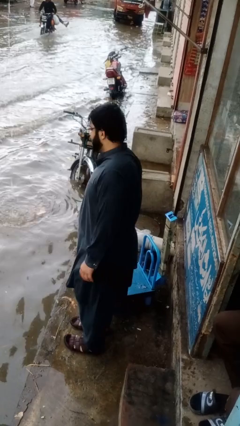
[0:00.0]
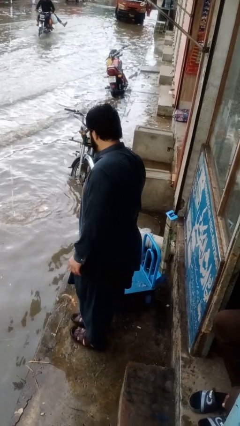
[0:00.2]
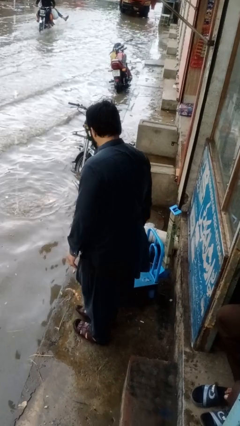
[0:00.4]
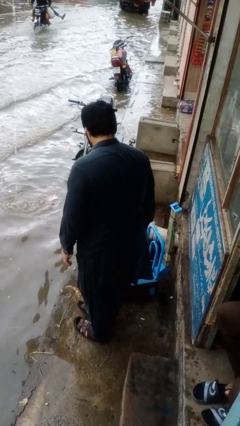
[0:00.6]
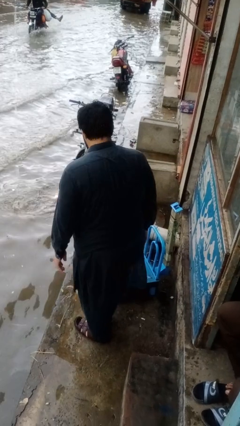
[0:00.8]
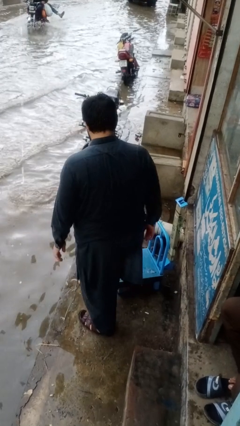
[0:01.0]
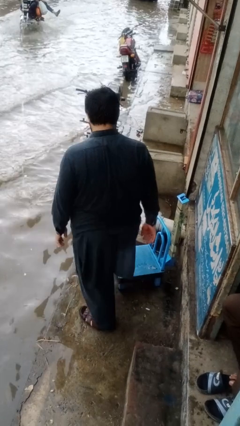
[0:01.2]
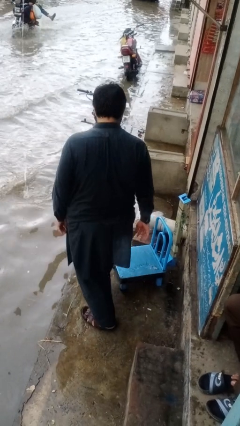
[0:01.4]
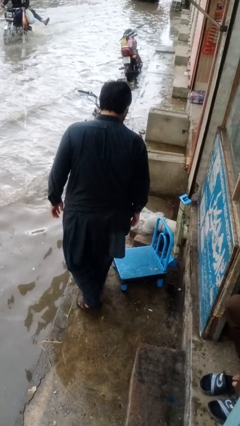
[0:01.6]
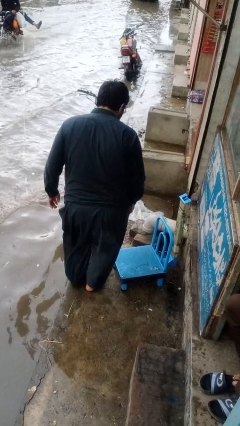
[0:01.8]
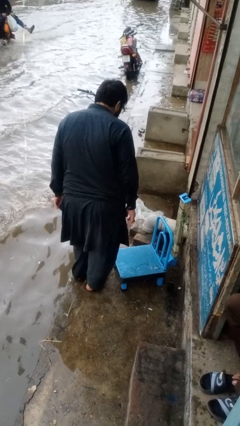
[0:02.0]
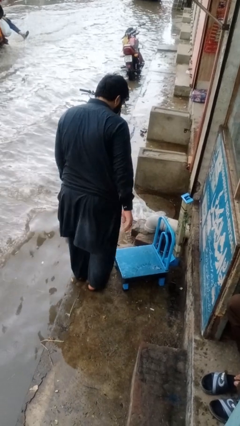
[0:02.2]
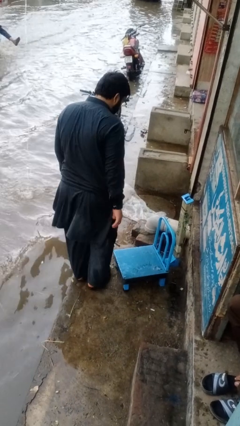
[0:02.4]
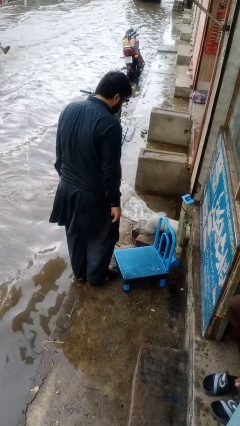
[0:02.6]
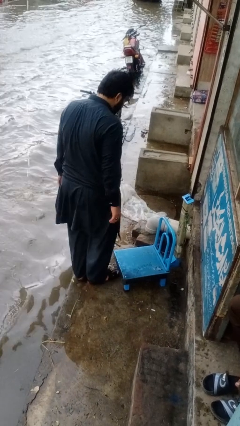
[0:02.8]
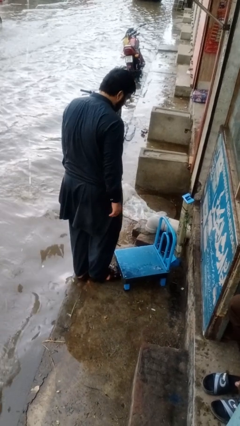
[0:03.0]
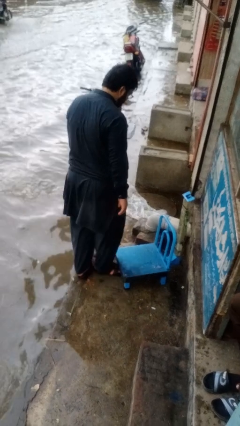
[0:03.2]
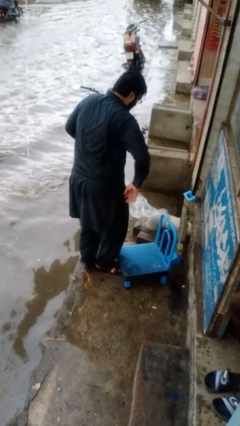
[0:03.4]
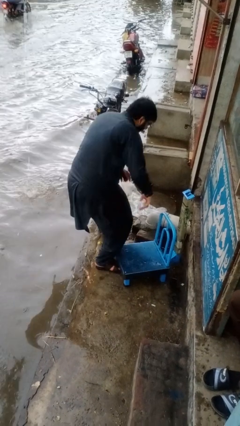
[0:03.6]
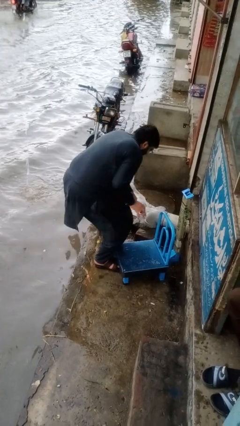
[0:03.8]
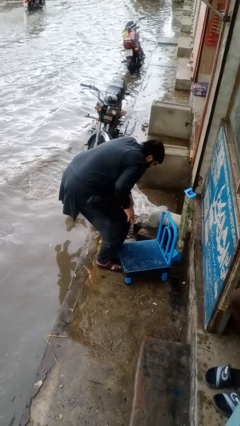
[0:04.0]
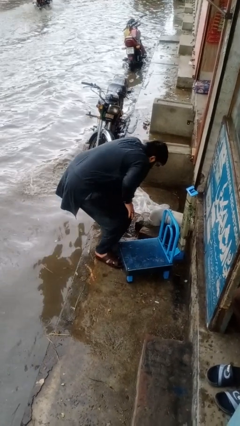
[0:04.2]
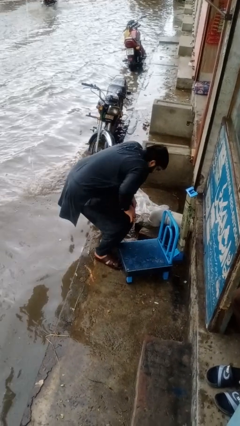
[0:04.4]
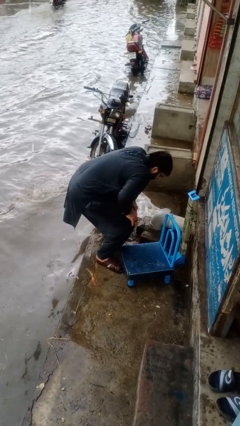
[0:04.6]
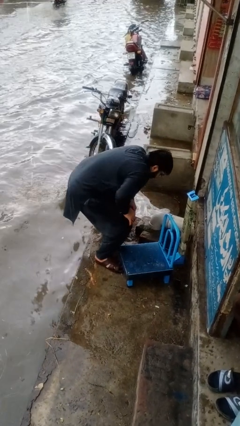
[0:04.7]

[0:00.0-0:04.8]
person trips on object on floor

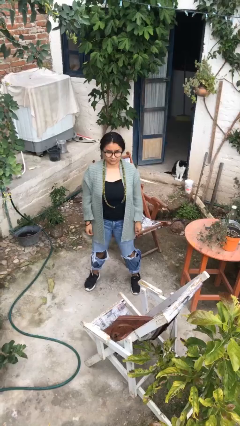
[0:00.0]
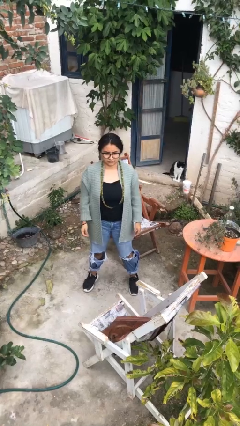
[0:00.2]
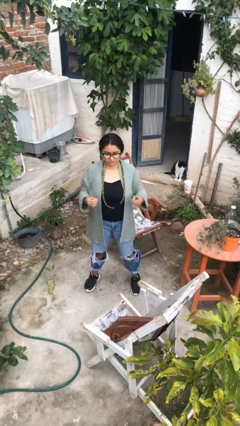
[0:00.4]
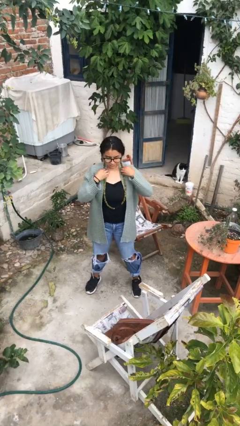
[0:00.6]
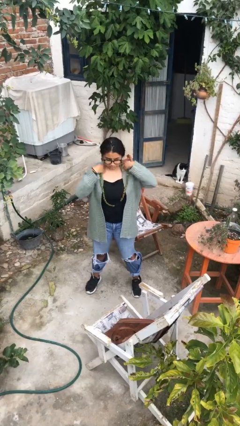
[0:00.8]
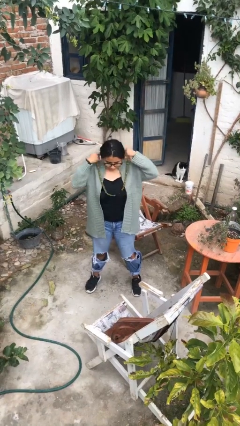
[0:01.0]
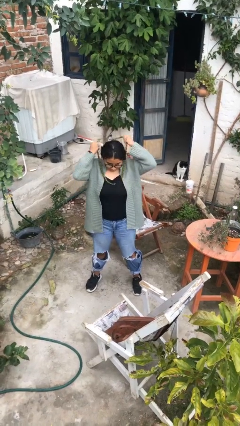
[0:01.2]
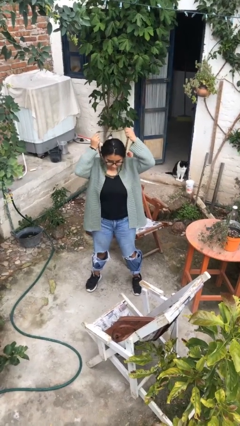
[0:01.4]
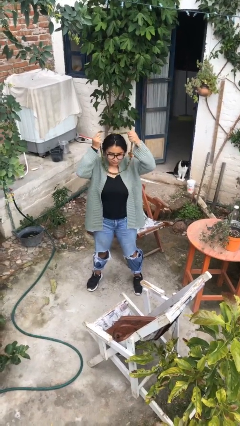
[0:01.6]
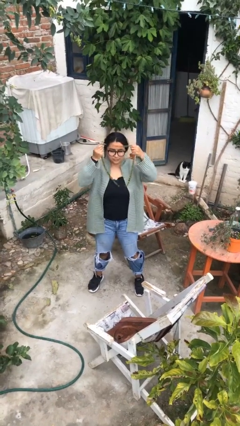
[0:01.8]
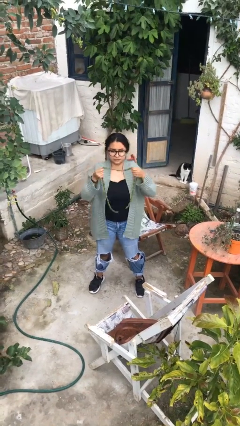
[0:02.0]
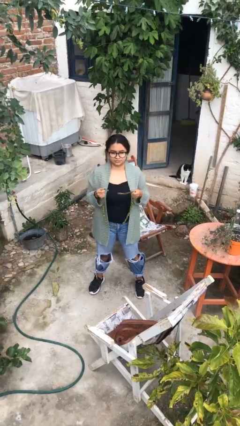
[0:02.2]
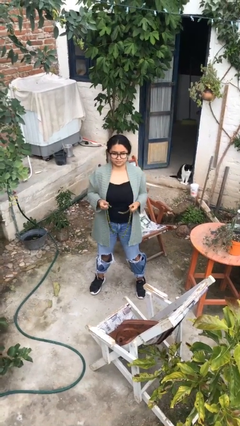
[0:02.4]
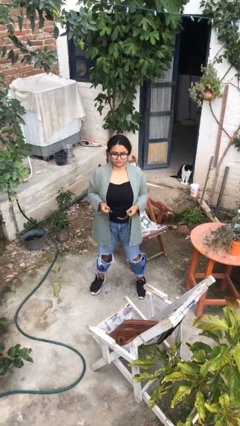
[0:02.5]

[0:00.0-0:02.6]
person takes off necklace

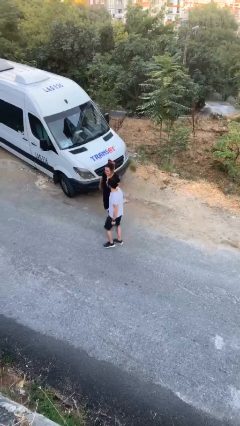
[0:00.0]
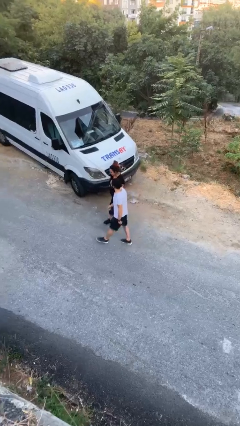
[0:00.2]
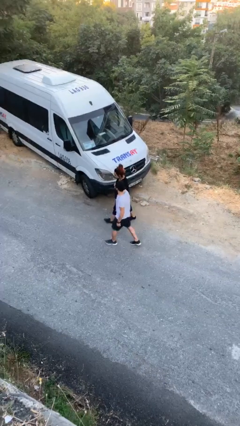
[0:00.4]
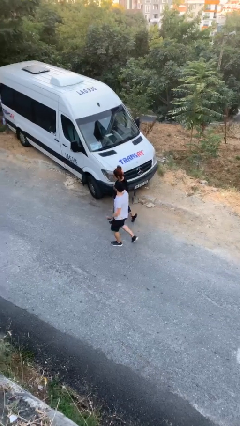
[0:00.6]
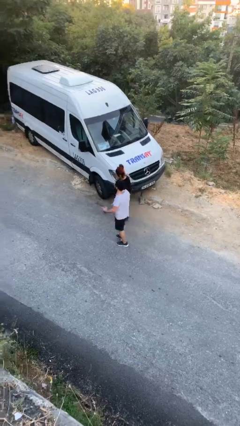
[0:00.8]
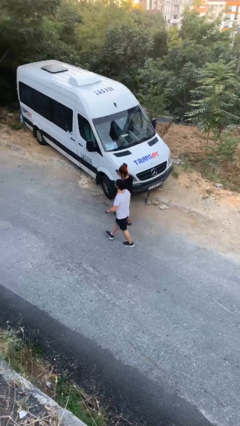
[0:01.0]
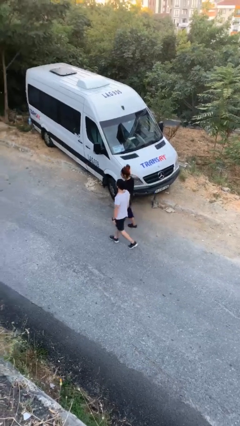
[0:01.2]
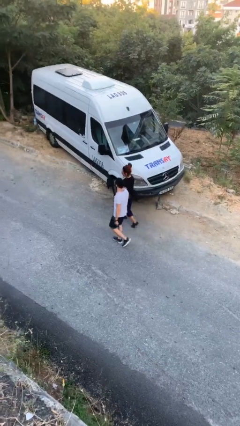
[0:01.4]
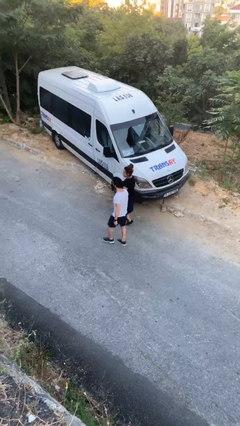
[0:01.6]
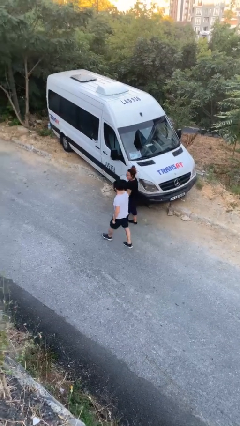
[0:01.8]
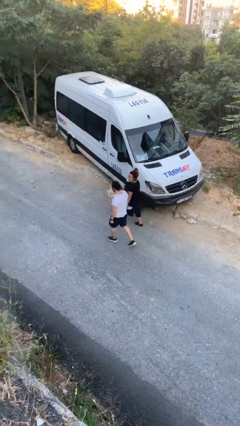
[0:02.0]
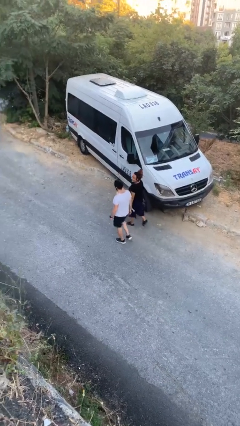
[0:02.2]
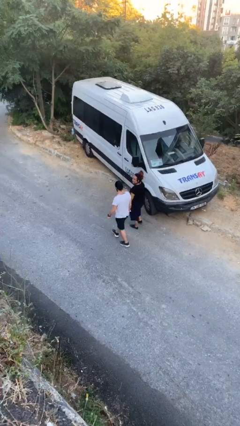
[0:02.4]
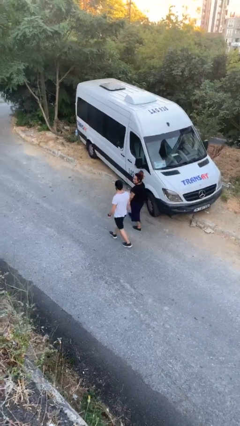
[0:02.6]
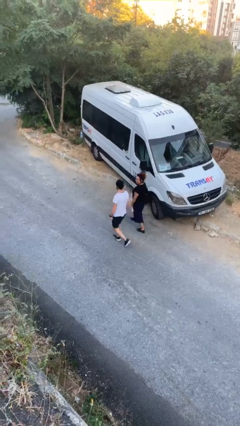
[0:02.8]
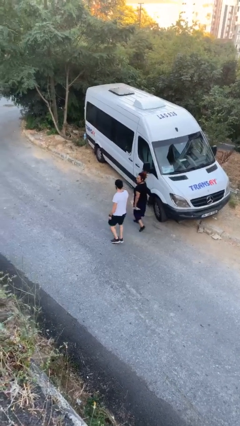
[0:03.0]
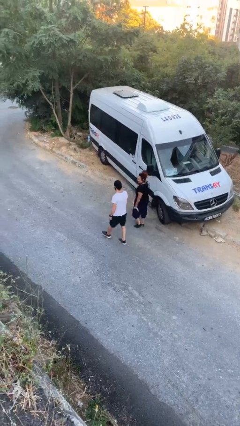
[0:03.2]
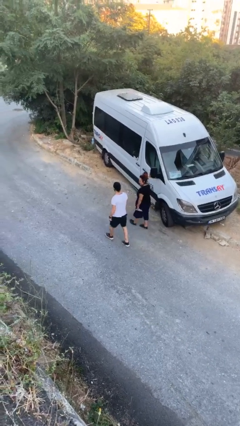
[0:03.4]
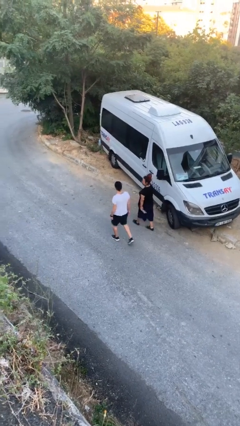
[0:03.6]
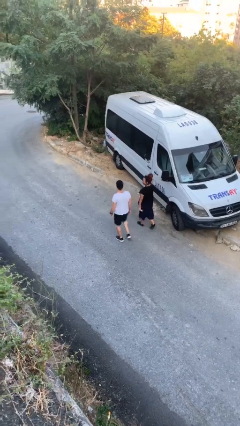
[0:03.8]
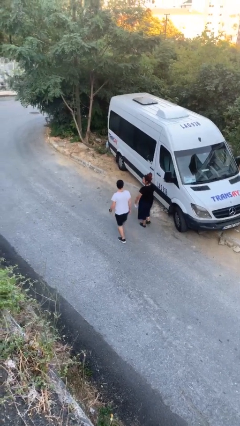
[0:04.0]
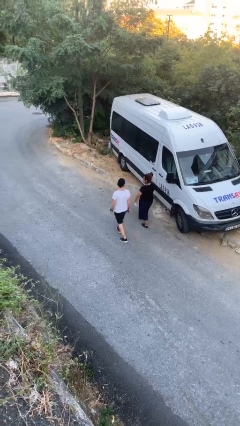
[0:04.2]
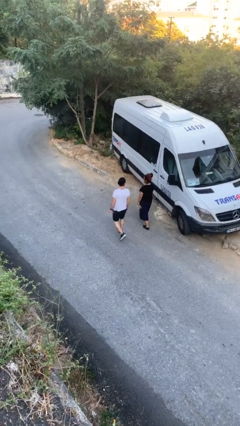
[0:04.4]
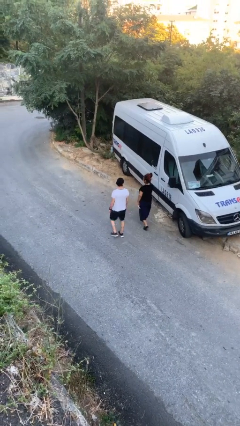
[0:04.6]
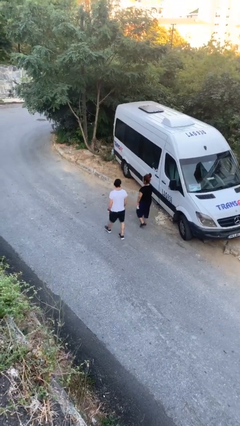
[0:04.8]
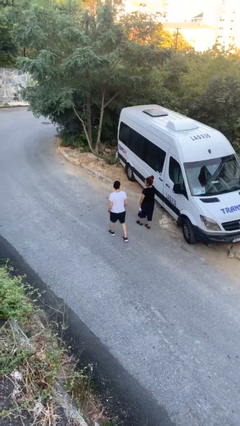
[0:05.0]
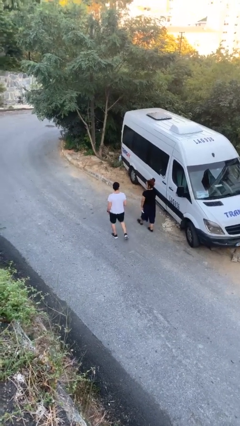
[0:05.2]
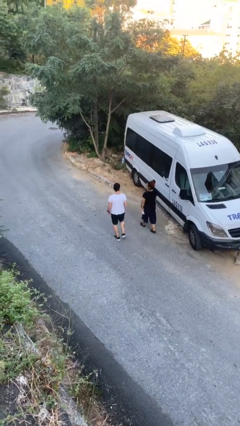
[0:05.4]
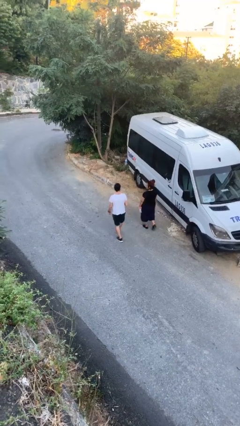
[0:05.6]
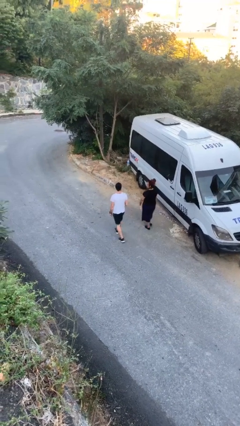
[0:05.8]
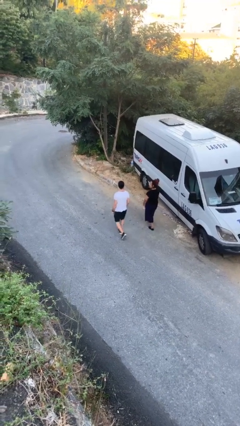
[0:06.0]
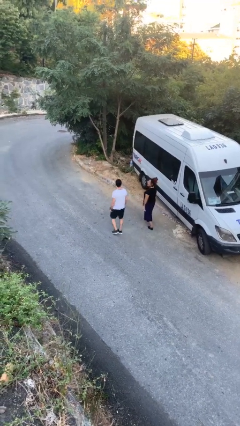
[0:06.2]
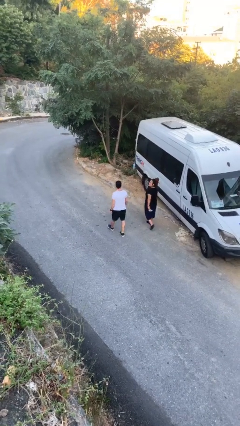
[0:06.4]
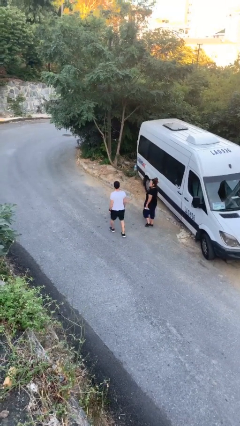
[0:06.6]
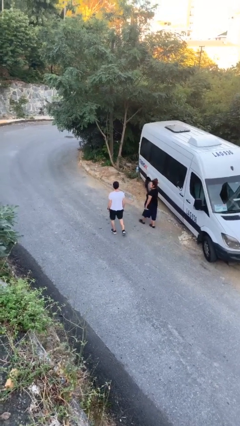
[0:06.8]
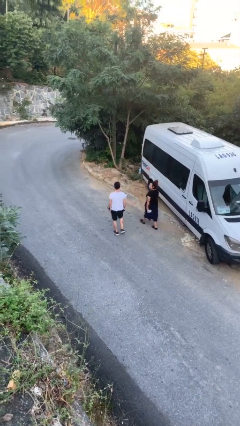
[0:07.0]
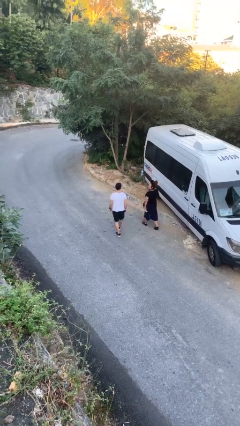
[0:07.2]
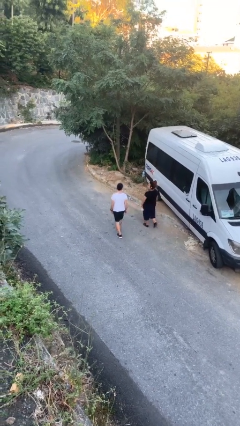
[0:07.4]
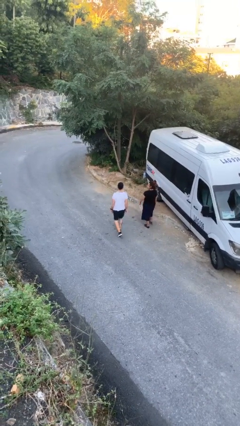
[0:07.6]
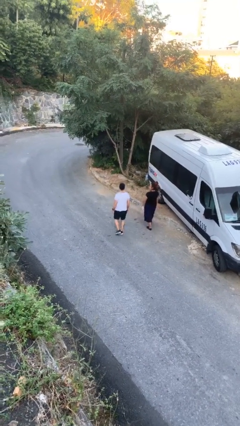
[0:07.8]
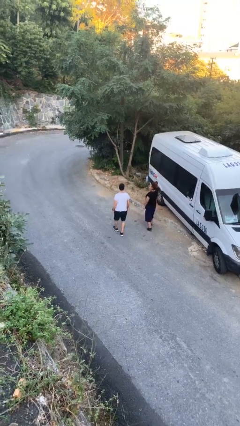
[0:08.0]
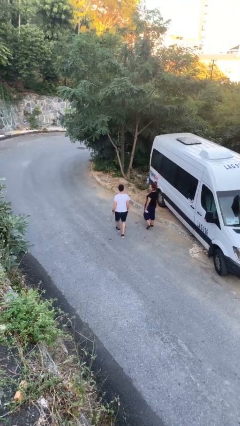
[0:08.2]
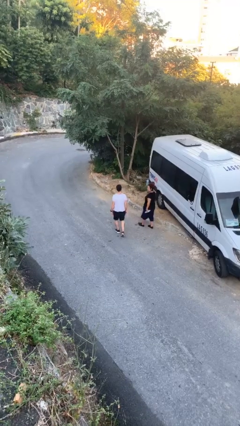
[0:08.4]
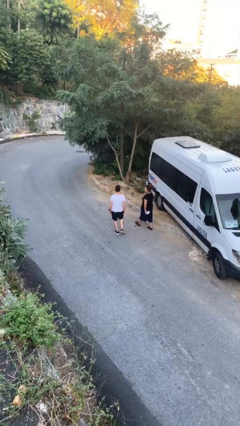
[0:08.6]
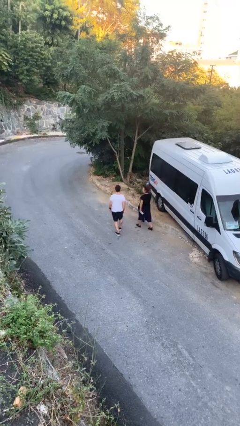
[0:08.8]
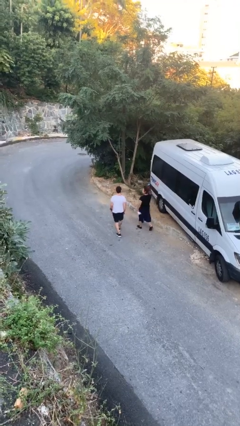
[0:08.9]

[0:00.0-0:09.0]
person talks to person

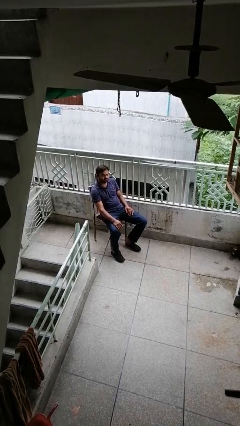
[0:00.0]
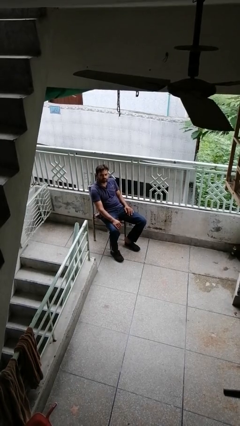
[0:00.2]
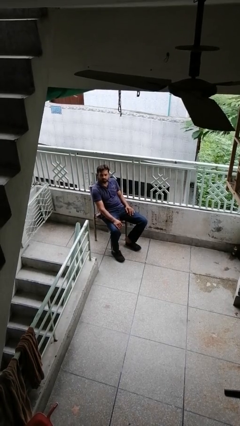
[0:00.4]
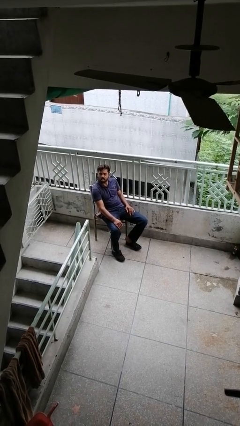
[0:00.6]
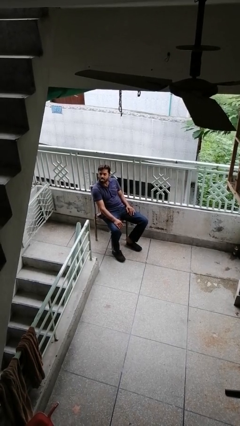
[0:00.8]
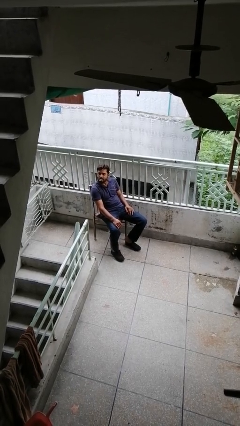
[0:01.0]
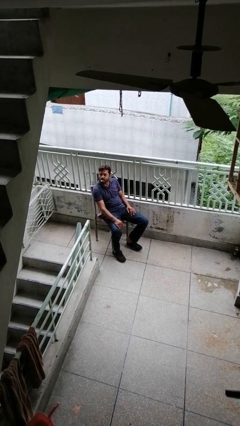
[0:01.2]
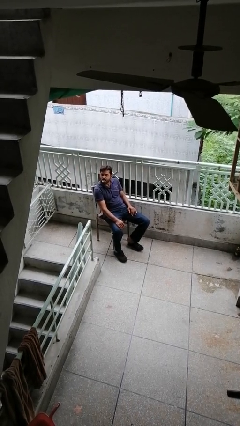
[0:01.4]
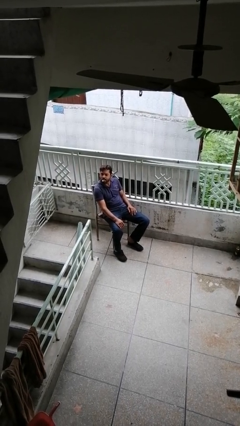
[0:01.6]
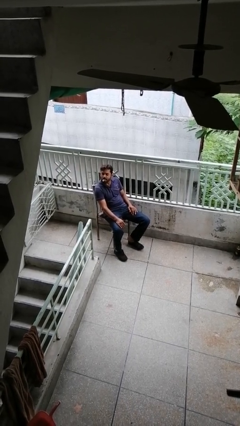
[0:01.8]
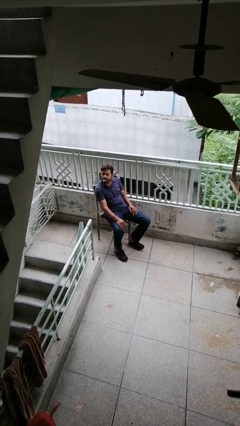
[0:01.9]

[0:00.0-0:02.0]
person sticks out tongue
